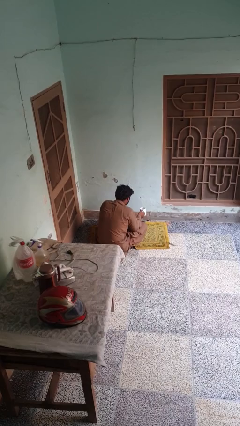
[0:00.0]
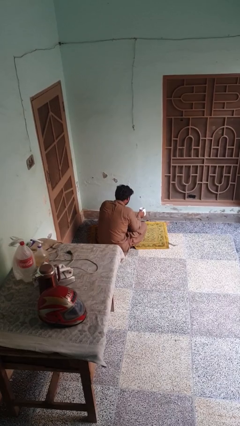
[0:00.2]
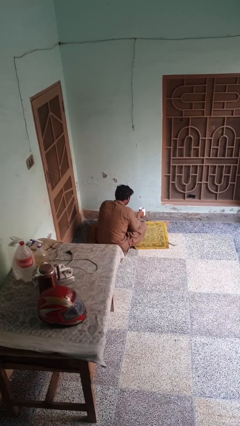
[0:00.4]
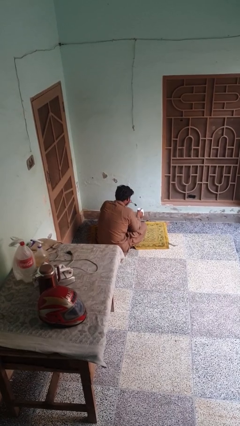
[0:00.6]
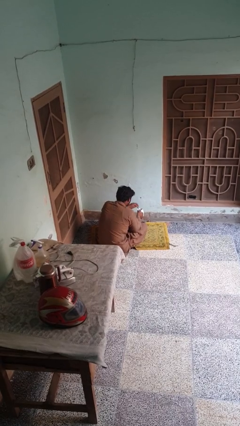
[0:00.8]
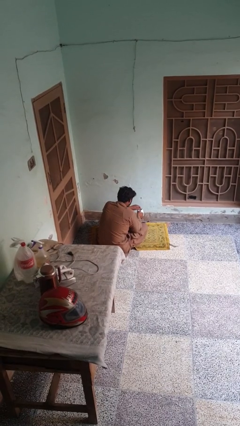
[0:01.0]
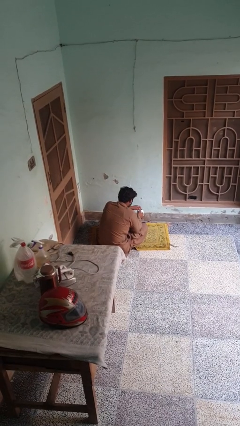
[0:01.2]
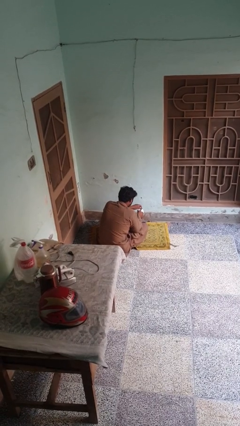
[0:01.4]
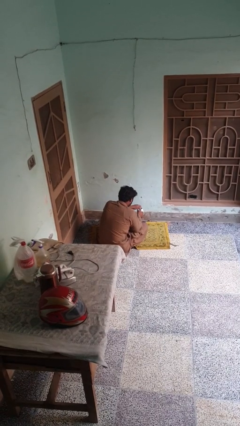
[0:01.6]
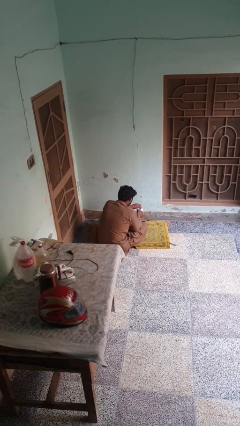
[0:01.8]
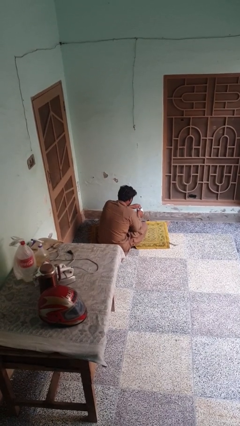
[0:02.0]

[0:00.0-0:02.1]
person stirs mug

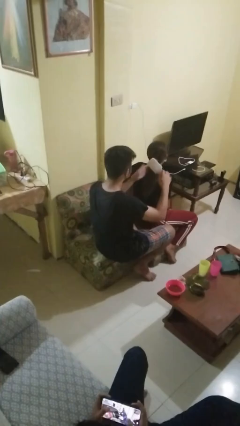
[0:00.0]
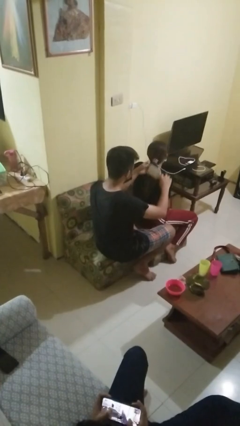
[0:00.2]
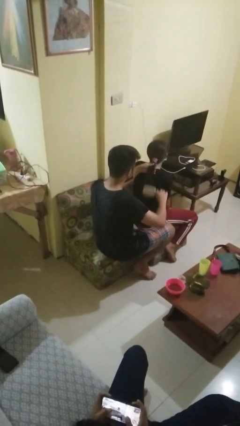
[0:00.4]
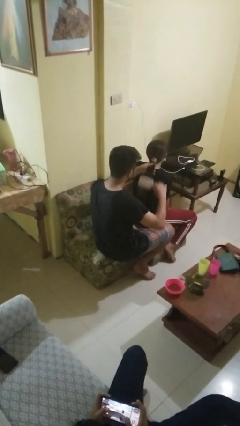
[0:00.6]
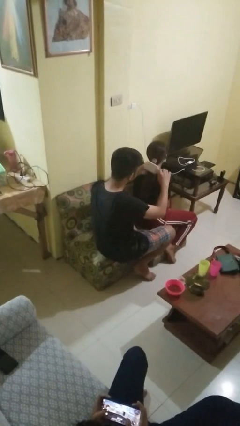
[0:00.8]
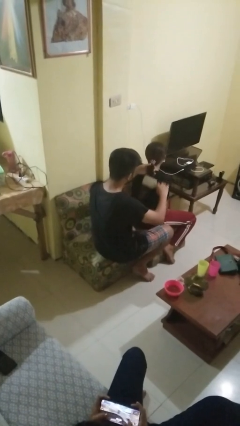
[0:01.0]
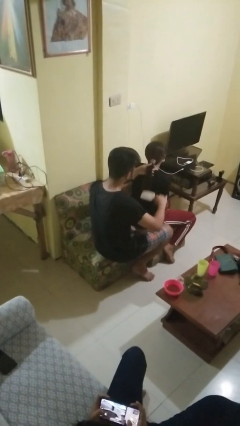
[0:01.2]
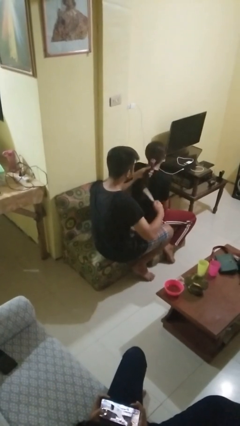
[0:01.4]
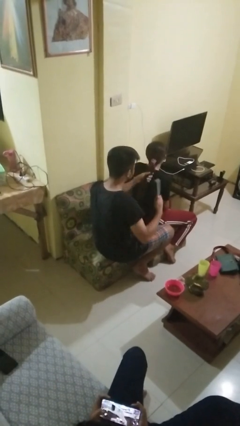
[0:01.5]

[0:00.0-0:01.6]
person brushes hair of person

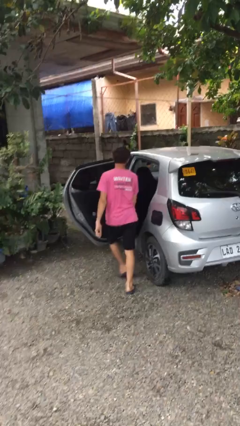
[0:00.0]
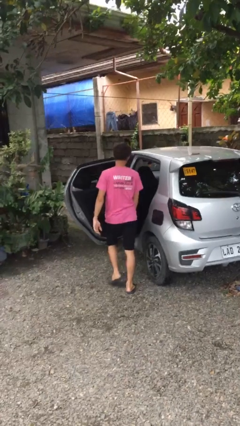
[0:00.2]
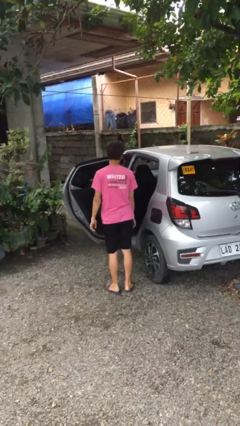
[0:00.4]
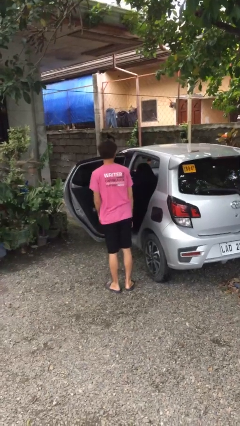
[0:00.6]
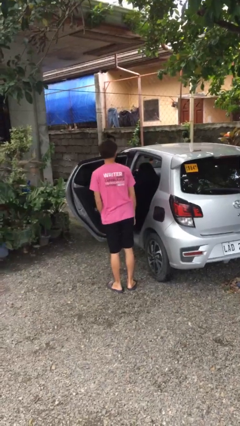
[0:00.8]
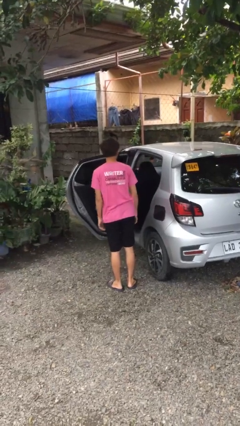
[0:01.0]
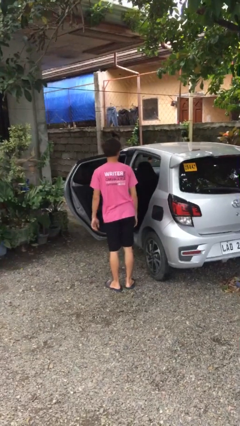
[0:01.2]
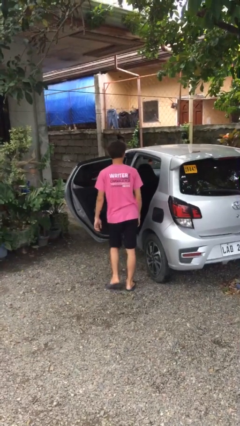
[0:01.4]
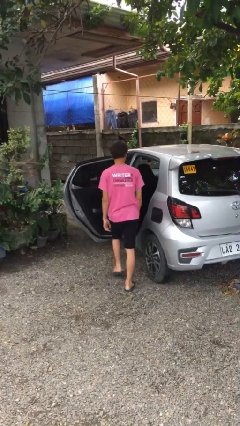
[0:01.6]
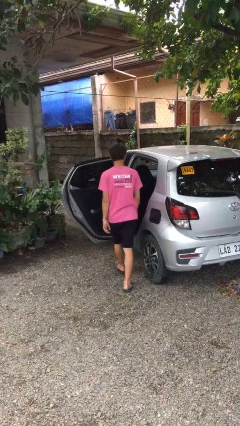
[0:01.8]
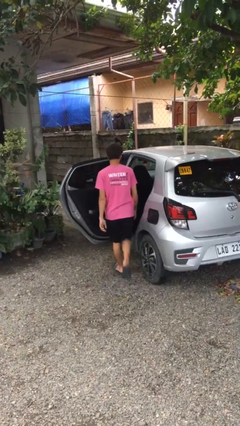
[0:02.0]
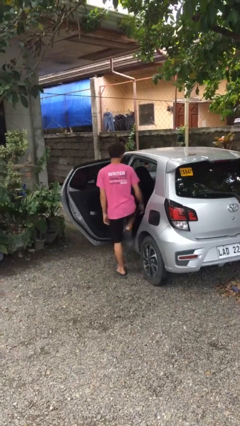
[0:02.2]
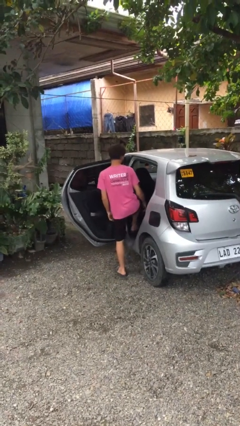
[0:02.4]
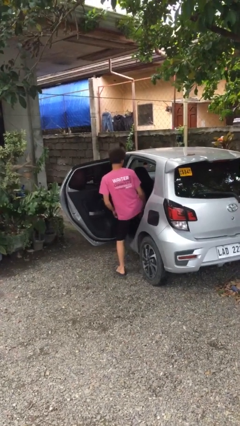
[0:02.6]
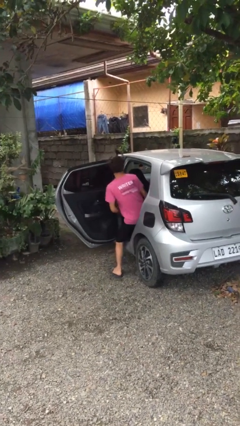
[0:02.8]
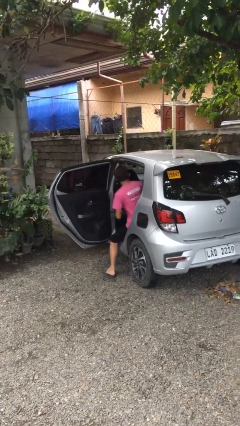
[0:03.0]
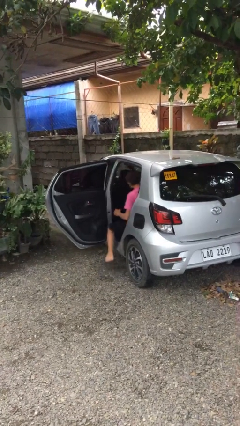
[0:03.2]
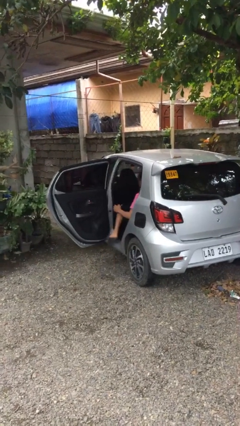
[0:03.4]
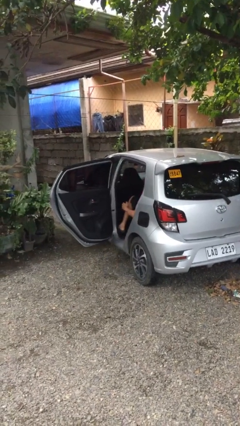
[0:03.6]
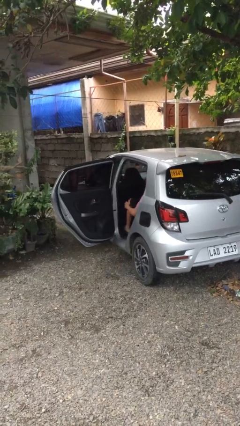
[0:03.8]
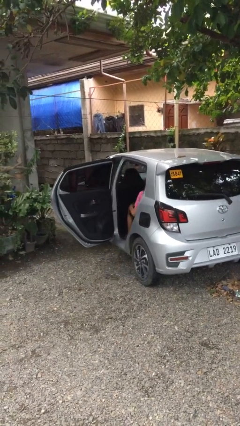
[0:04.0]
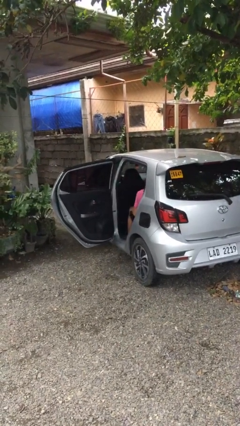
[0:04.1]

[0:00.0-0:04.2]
person enters car

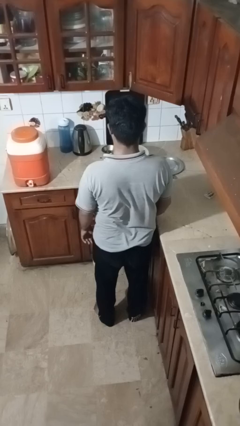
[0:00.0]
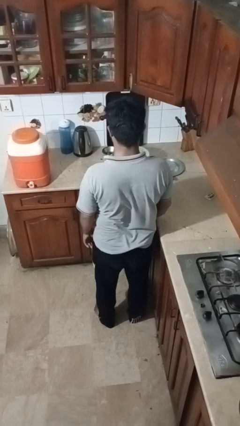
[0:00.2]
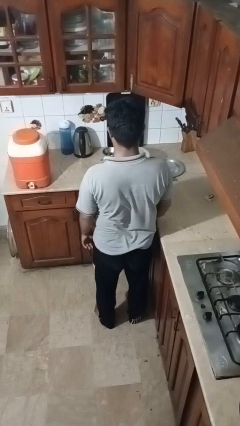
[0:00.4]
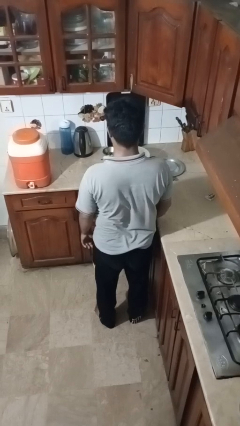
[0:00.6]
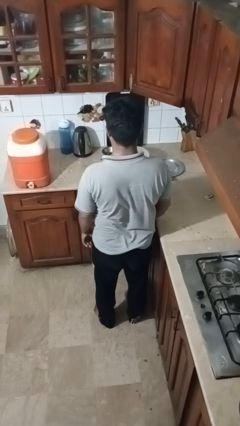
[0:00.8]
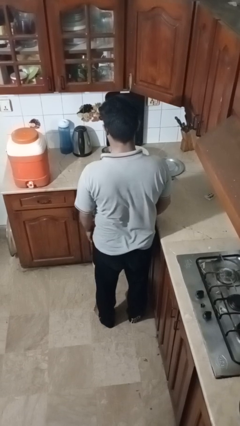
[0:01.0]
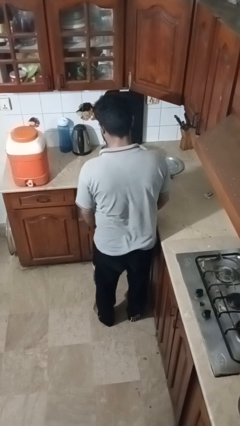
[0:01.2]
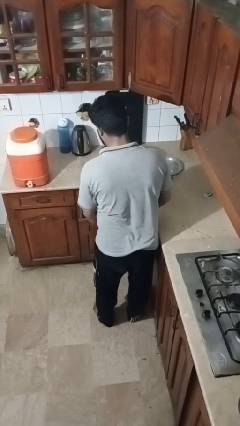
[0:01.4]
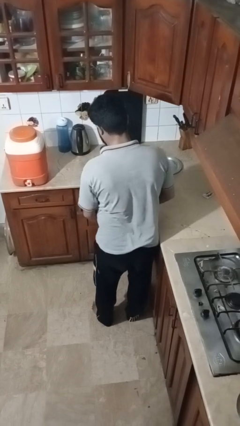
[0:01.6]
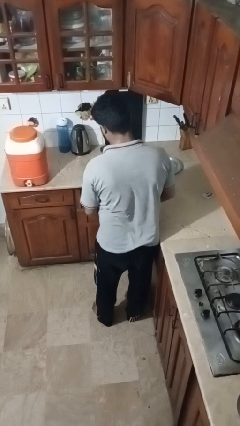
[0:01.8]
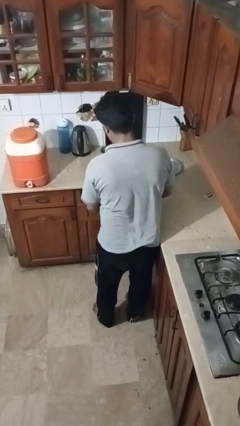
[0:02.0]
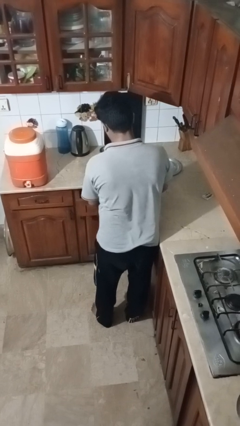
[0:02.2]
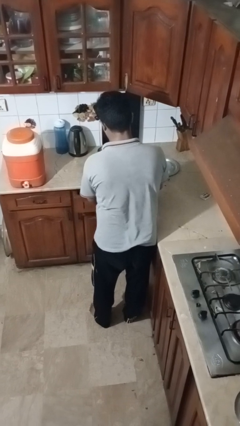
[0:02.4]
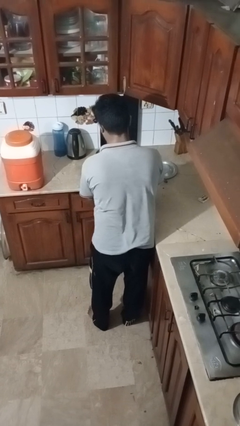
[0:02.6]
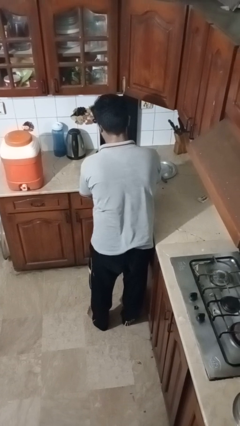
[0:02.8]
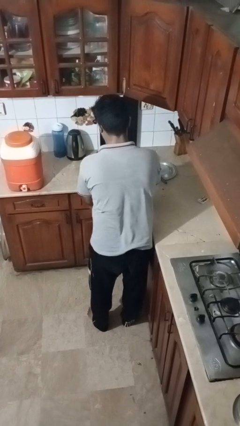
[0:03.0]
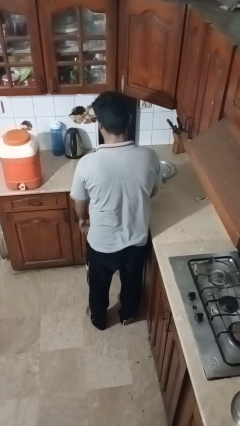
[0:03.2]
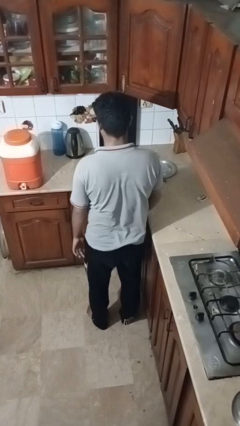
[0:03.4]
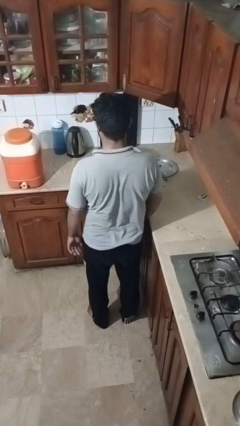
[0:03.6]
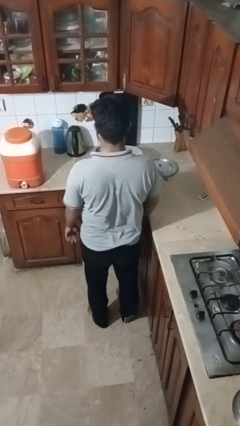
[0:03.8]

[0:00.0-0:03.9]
person closes kitchen drawer

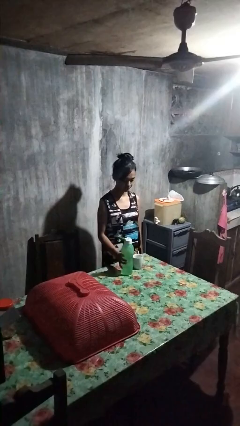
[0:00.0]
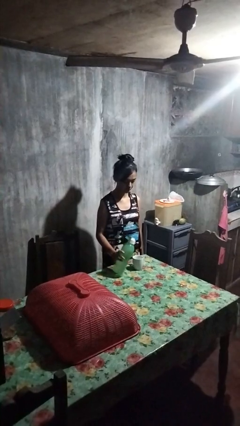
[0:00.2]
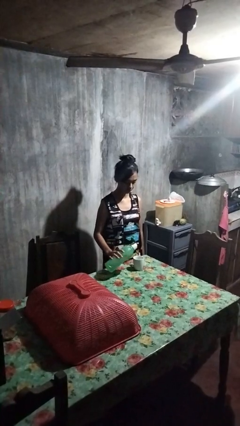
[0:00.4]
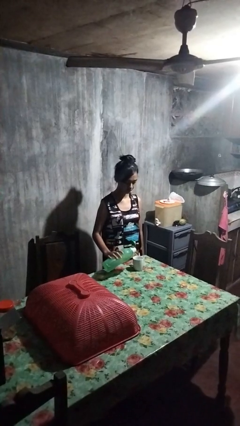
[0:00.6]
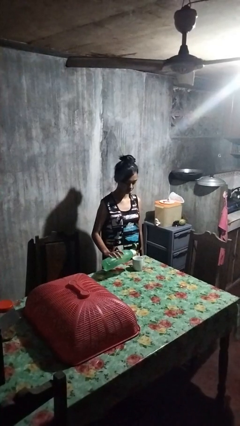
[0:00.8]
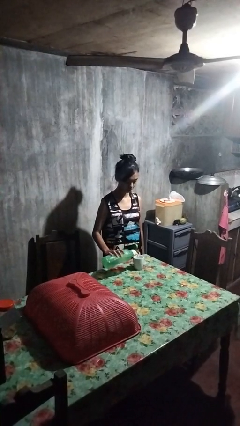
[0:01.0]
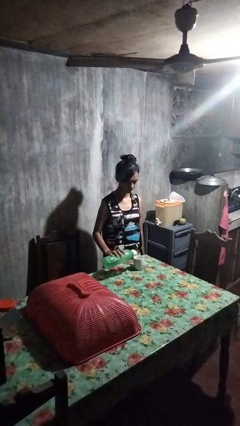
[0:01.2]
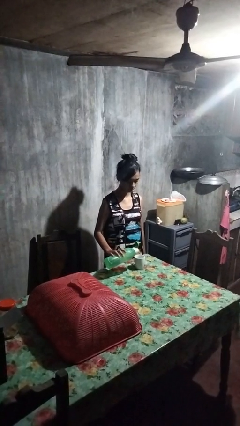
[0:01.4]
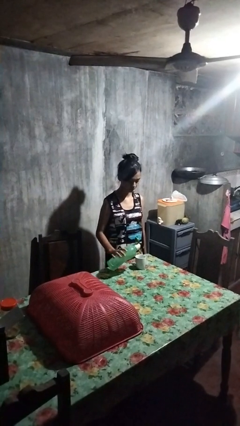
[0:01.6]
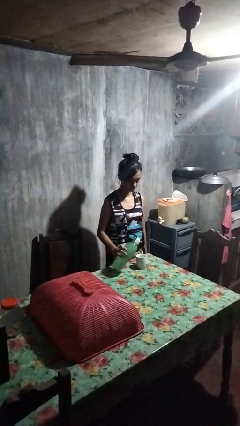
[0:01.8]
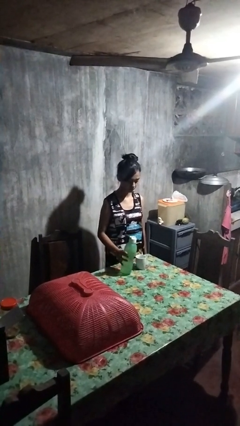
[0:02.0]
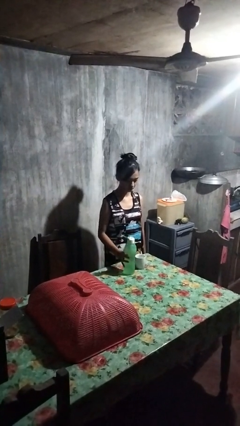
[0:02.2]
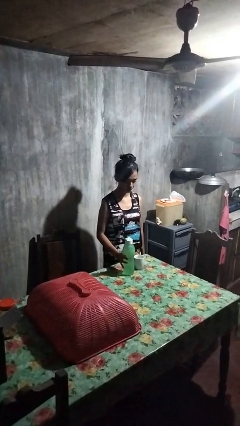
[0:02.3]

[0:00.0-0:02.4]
person pours liquid into cup

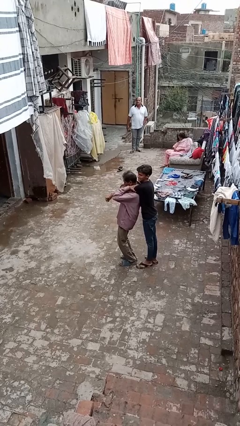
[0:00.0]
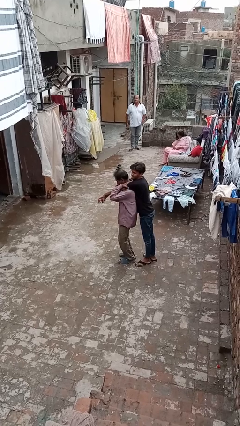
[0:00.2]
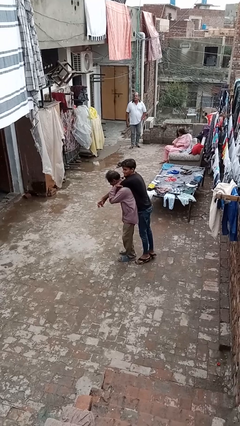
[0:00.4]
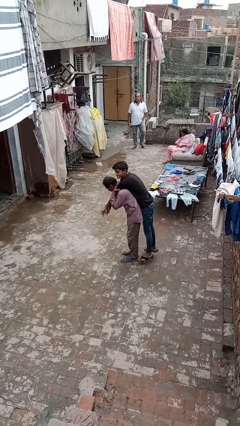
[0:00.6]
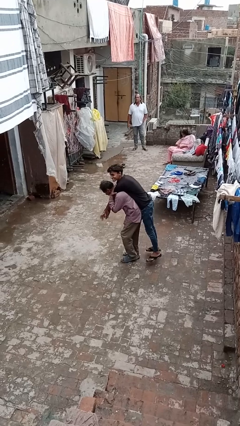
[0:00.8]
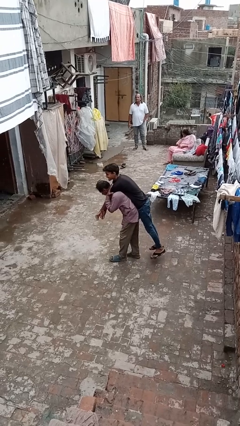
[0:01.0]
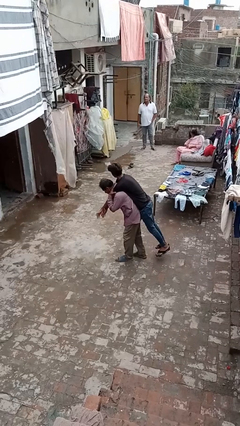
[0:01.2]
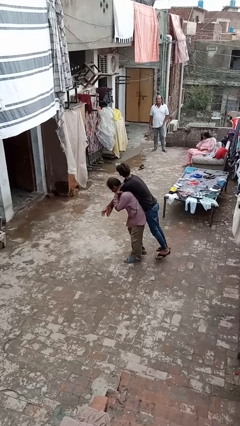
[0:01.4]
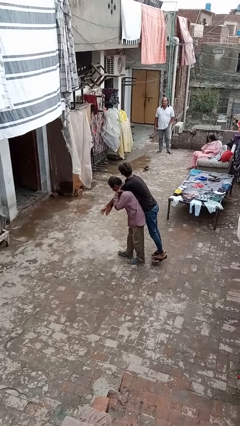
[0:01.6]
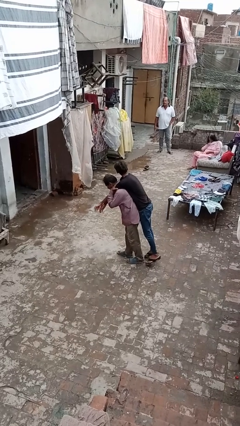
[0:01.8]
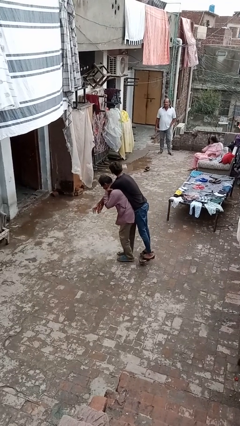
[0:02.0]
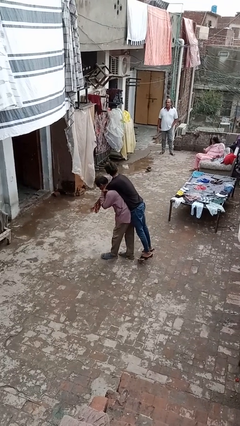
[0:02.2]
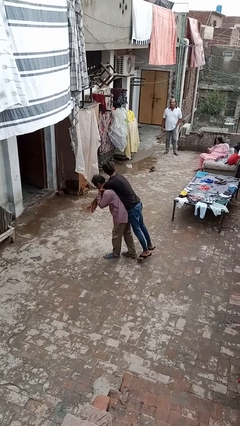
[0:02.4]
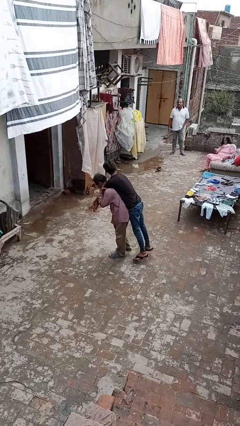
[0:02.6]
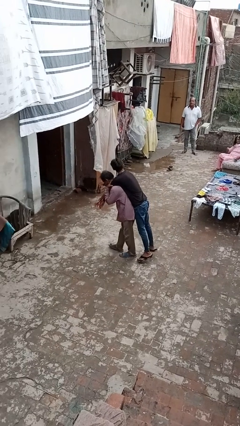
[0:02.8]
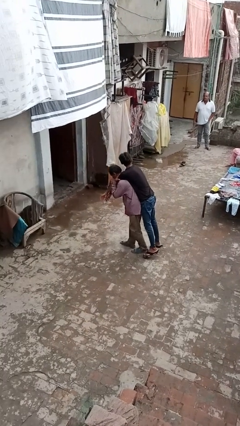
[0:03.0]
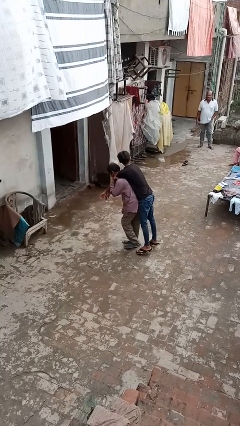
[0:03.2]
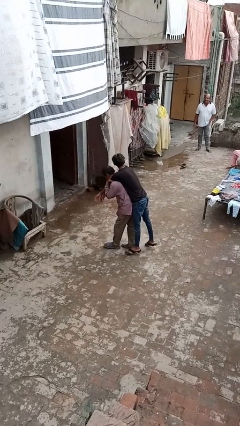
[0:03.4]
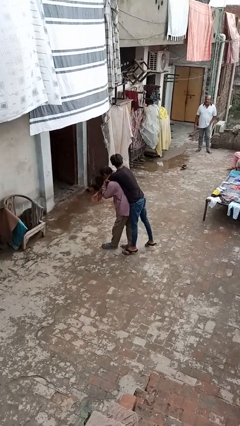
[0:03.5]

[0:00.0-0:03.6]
person carries person on back
